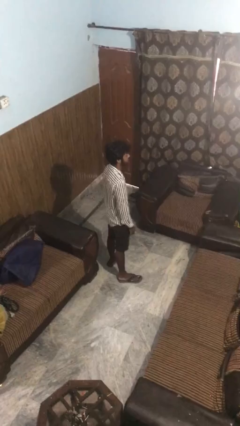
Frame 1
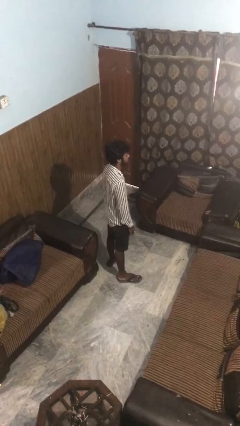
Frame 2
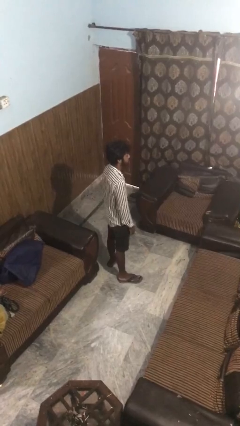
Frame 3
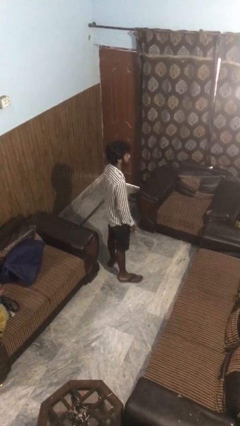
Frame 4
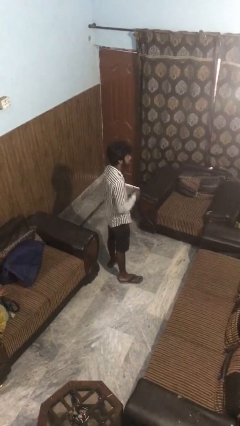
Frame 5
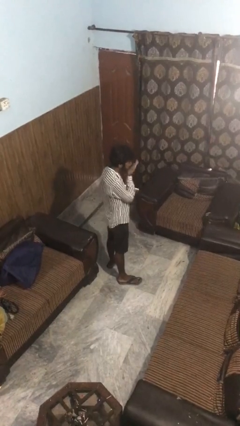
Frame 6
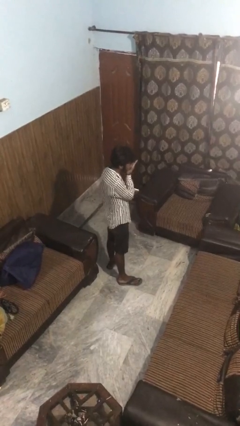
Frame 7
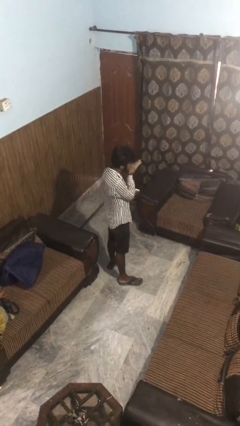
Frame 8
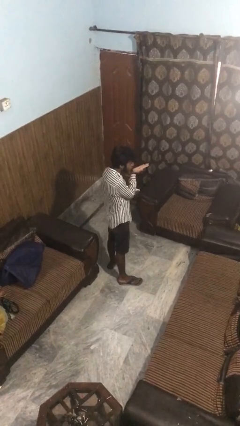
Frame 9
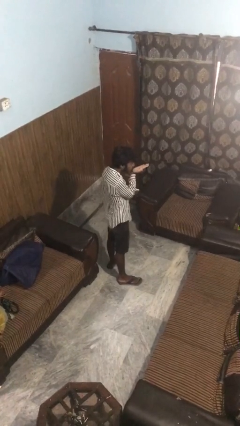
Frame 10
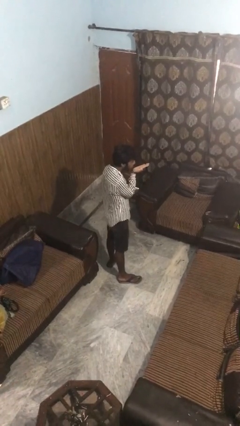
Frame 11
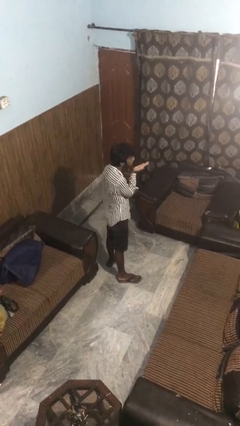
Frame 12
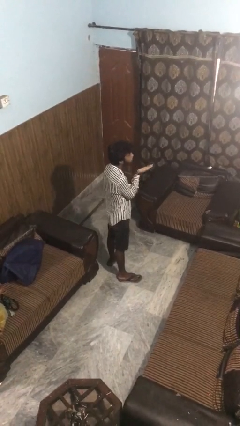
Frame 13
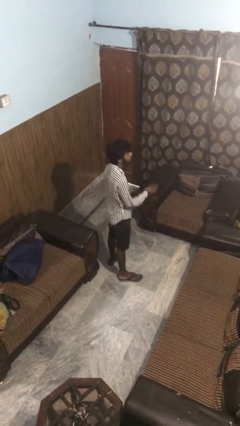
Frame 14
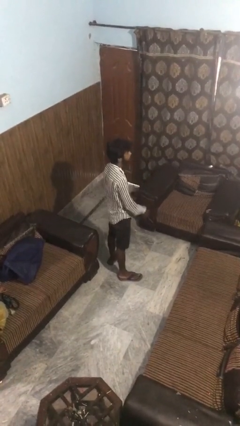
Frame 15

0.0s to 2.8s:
person gestures blow kiss

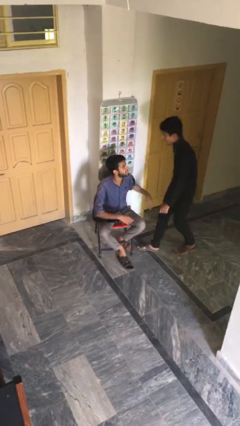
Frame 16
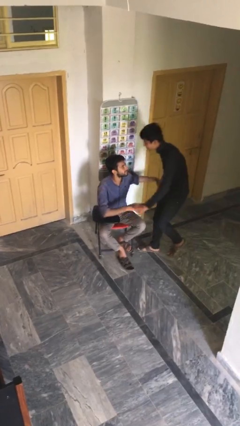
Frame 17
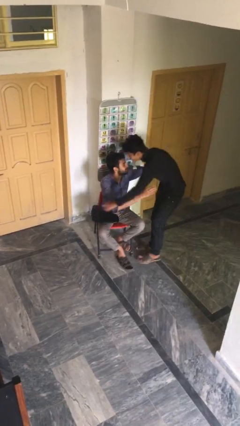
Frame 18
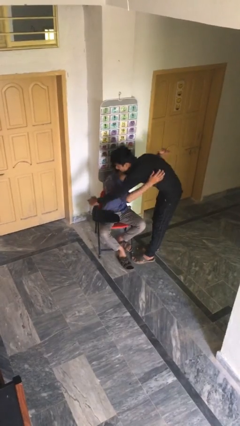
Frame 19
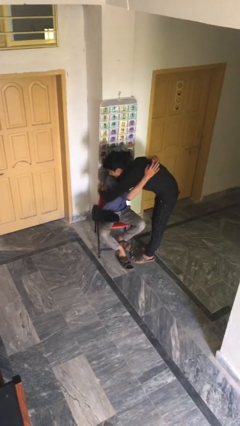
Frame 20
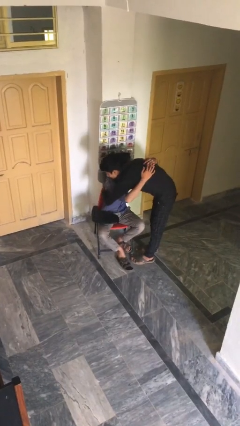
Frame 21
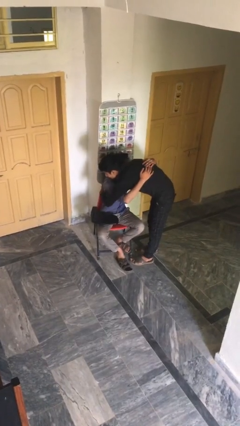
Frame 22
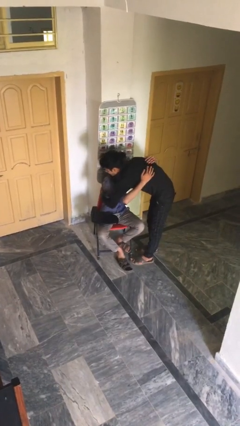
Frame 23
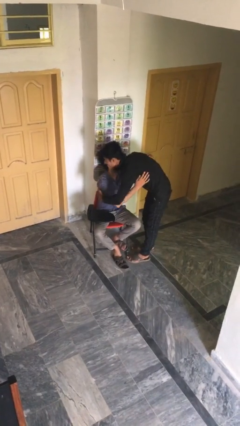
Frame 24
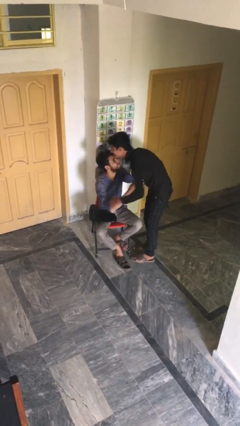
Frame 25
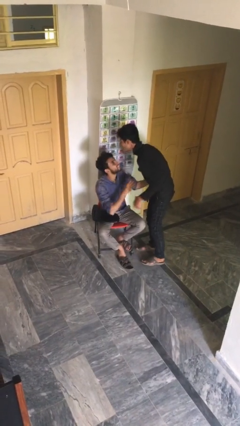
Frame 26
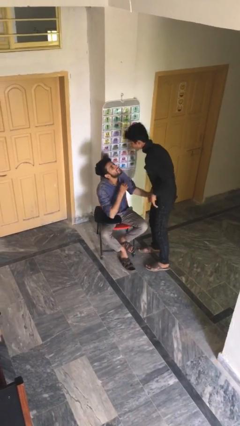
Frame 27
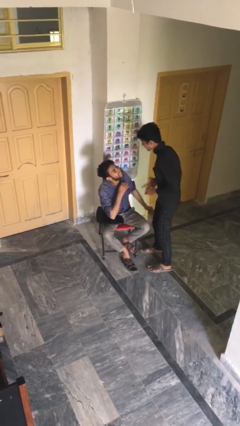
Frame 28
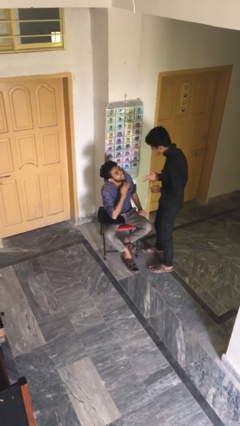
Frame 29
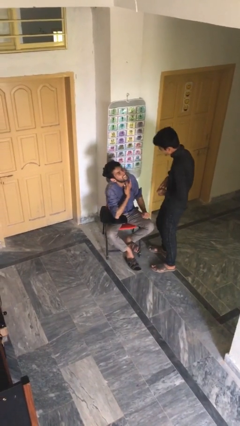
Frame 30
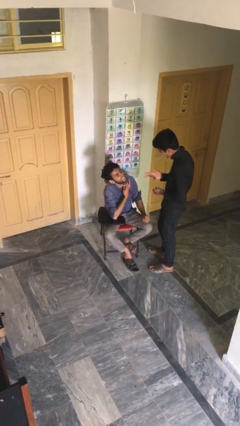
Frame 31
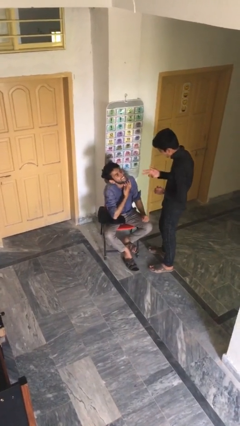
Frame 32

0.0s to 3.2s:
person embraces person

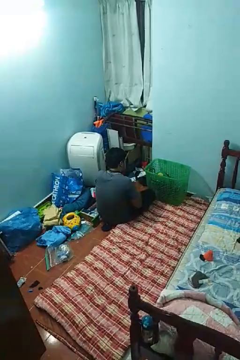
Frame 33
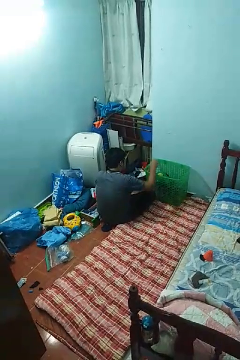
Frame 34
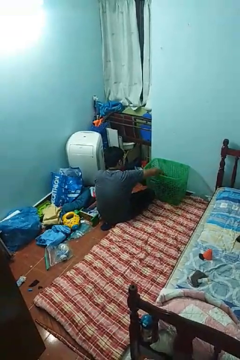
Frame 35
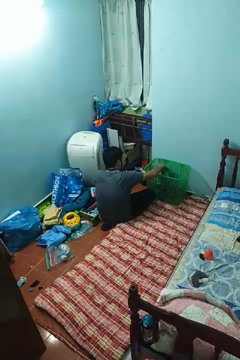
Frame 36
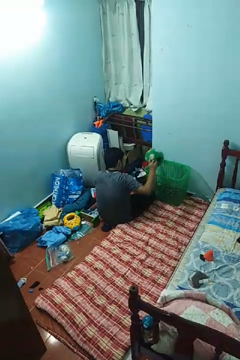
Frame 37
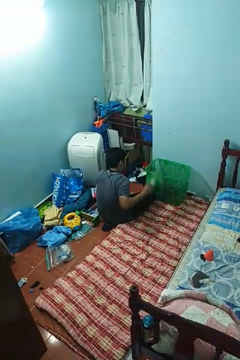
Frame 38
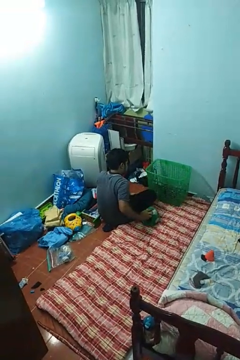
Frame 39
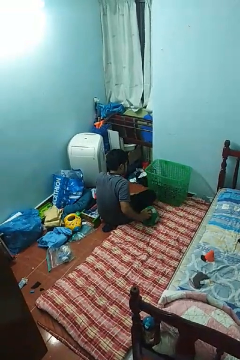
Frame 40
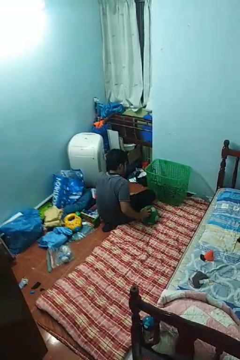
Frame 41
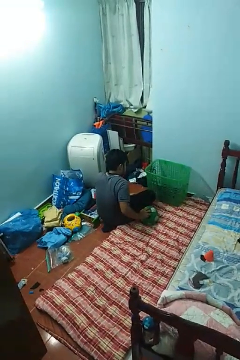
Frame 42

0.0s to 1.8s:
person takes object from basket

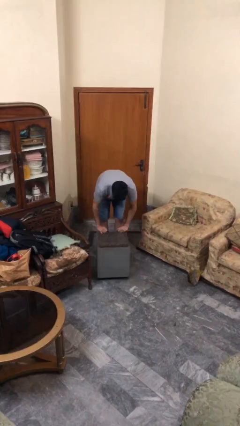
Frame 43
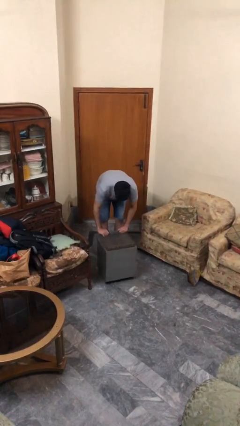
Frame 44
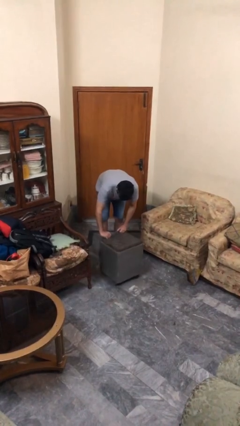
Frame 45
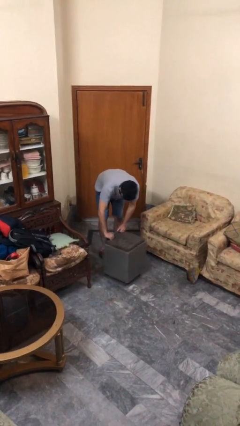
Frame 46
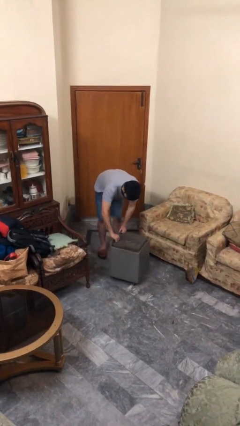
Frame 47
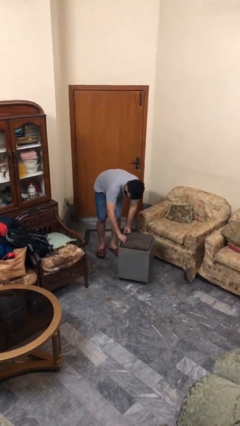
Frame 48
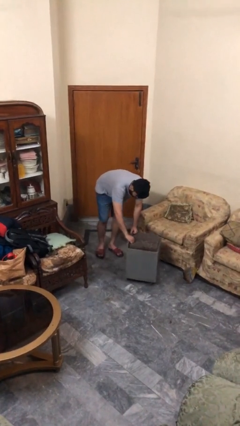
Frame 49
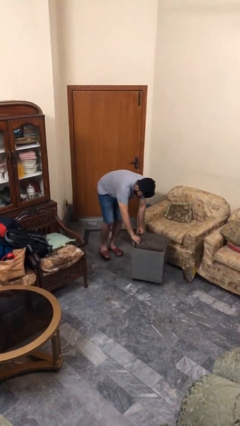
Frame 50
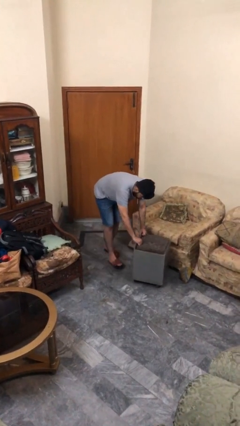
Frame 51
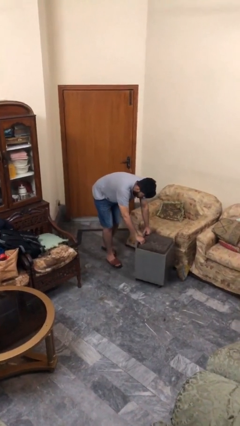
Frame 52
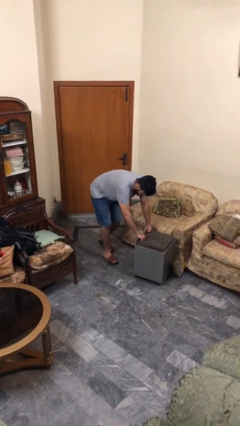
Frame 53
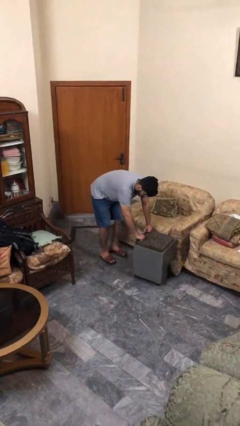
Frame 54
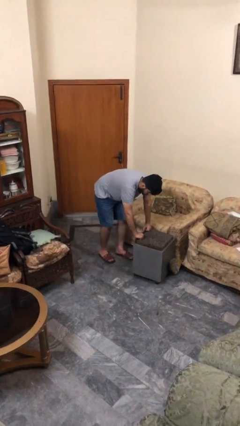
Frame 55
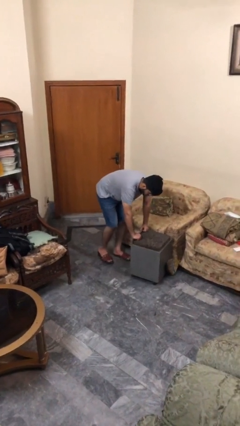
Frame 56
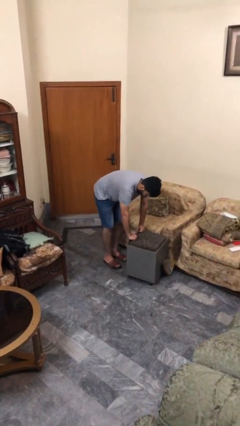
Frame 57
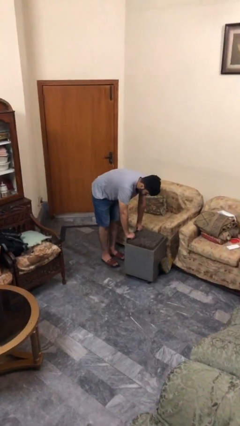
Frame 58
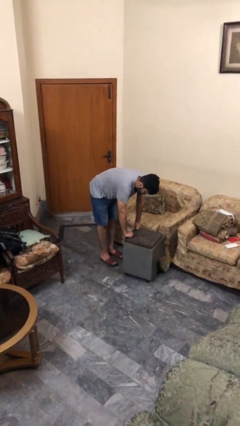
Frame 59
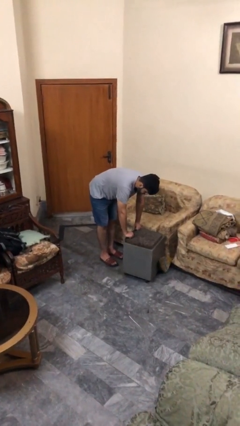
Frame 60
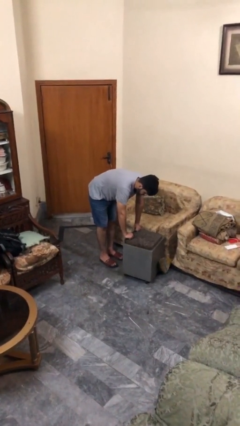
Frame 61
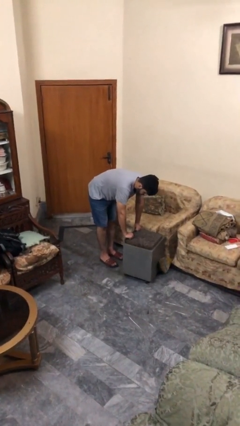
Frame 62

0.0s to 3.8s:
person pushes wheeled cart

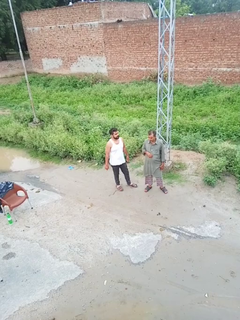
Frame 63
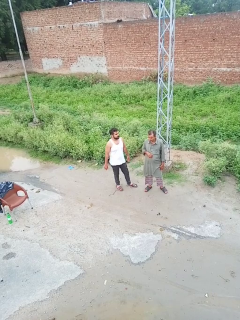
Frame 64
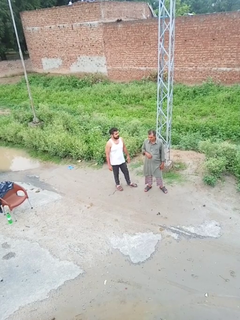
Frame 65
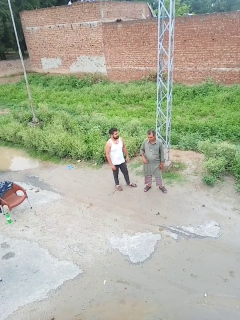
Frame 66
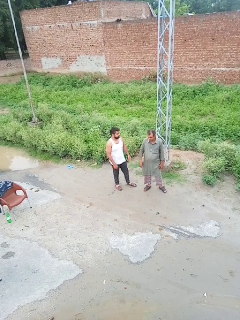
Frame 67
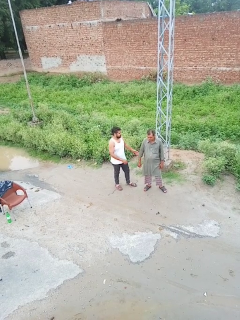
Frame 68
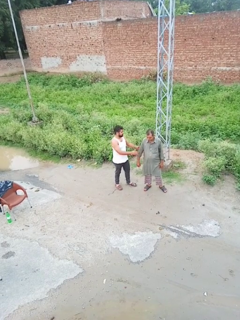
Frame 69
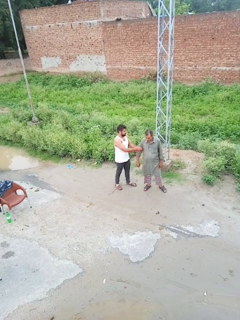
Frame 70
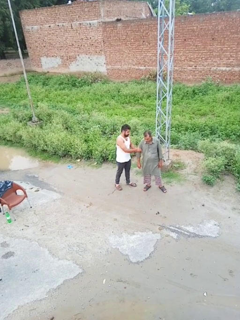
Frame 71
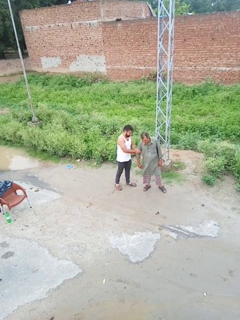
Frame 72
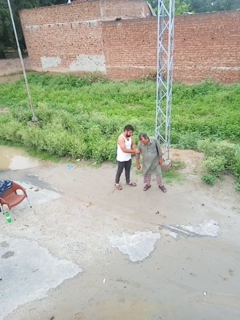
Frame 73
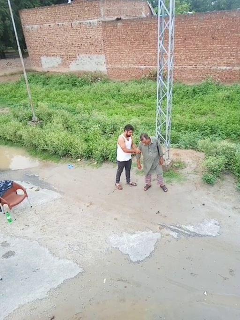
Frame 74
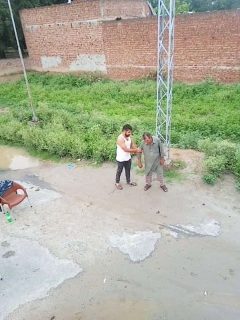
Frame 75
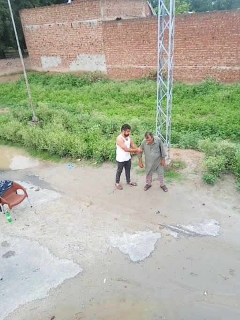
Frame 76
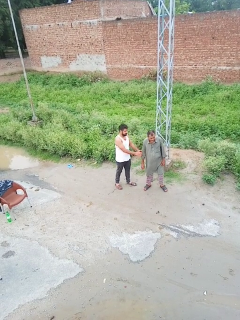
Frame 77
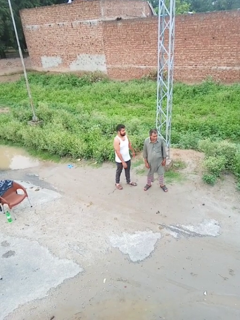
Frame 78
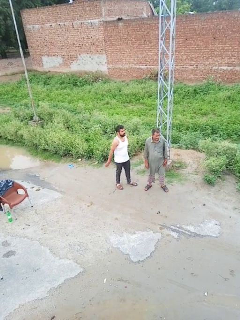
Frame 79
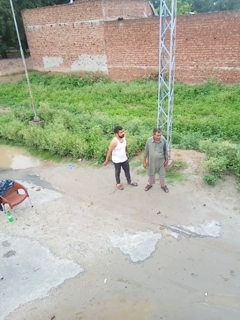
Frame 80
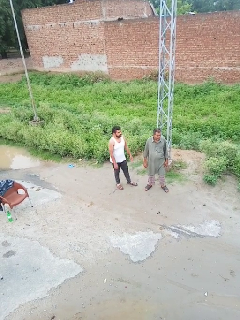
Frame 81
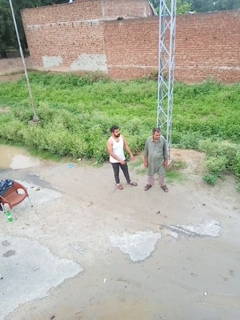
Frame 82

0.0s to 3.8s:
person grabs person by forearm

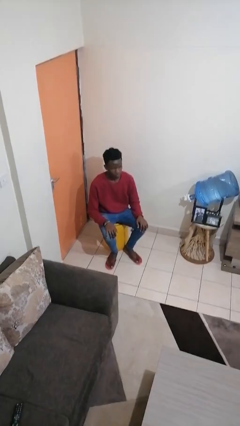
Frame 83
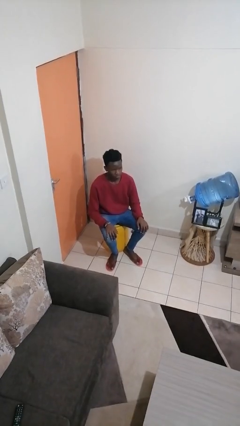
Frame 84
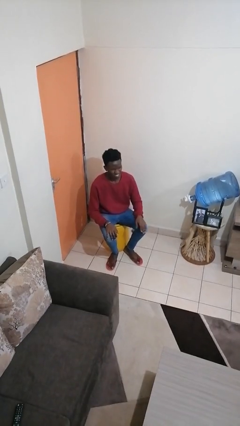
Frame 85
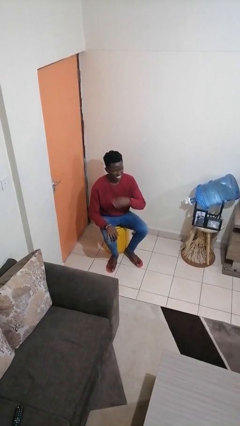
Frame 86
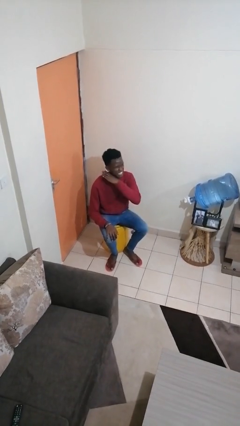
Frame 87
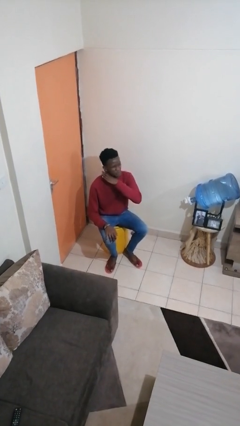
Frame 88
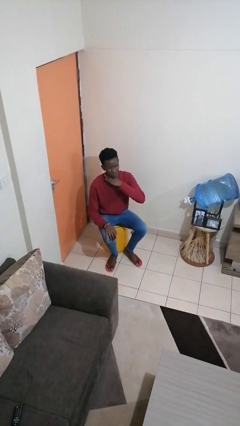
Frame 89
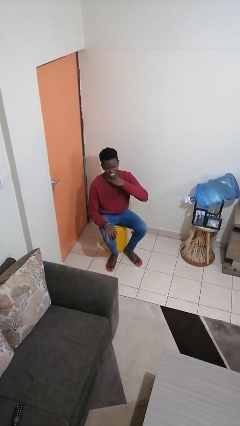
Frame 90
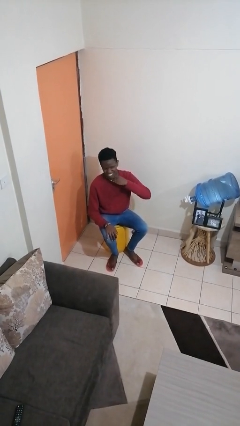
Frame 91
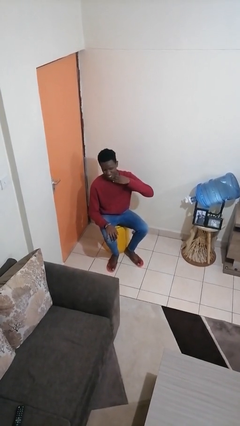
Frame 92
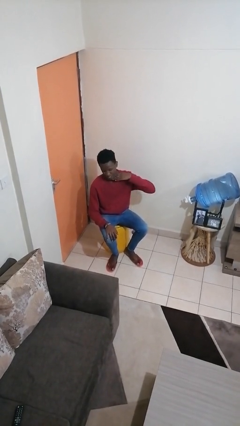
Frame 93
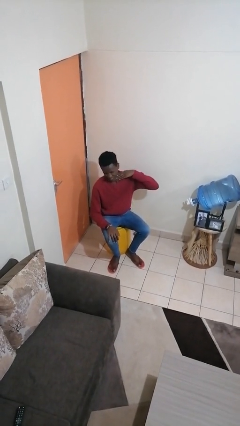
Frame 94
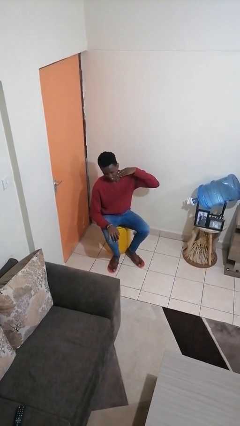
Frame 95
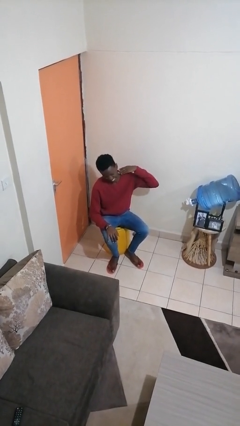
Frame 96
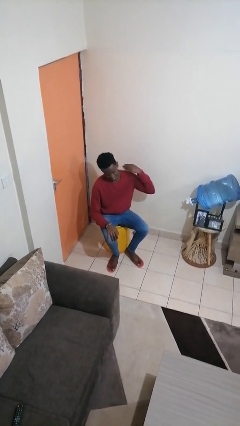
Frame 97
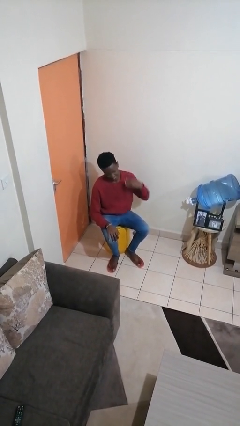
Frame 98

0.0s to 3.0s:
person gestures cut

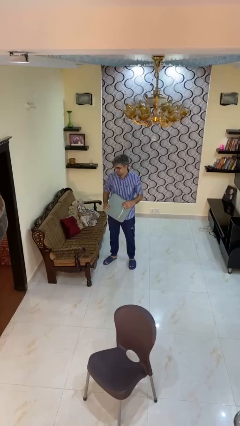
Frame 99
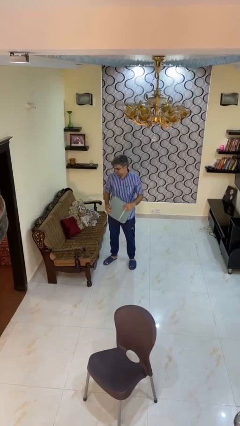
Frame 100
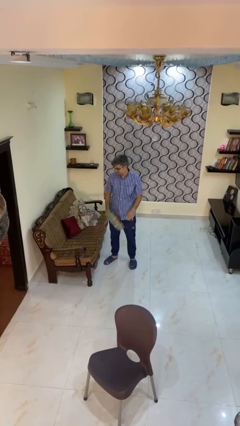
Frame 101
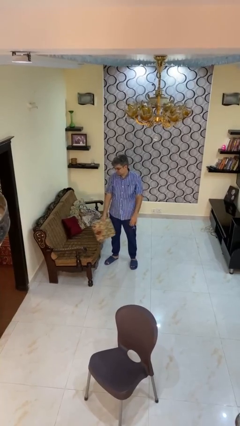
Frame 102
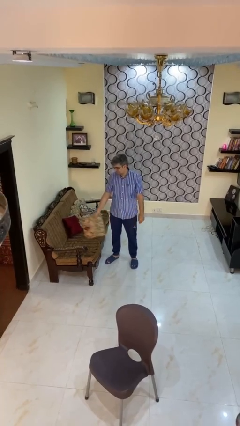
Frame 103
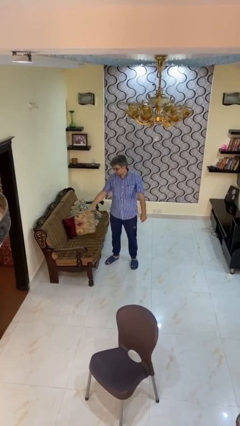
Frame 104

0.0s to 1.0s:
person puts down object on couch
